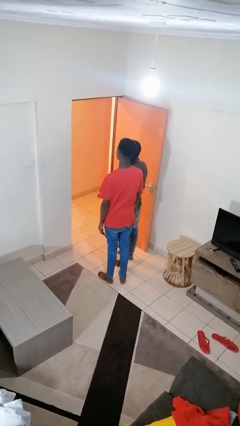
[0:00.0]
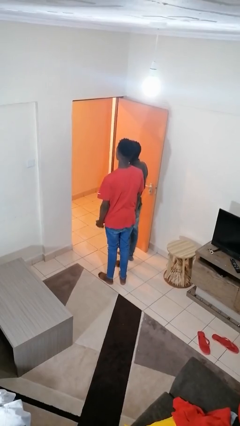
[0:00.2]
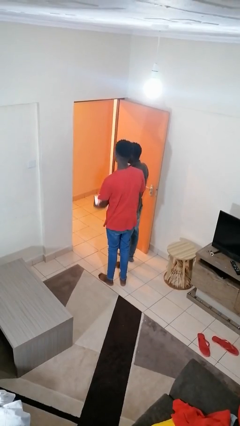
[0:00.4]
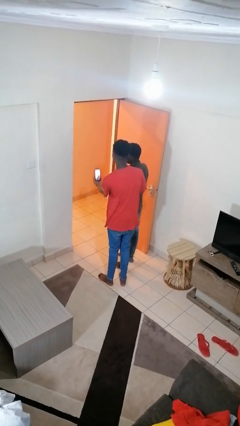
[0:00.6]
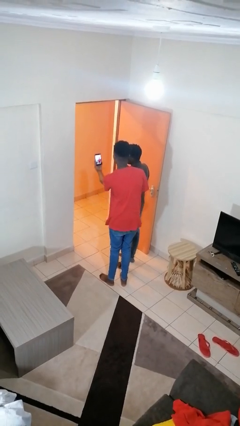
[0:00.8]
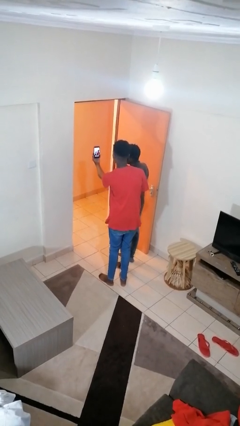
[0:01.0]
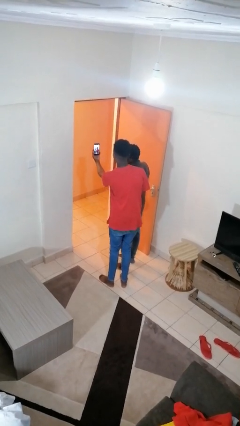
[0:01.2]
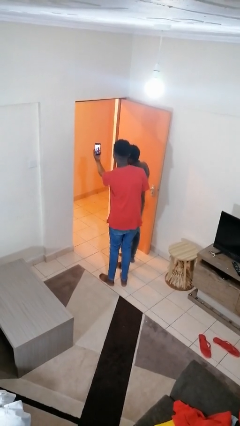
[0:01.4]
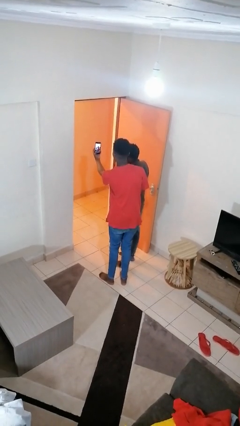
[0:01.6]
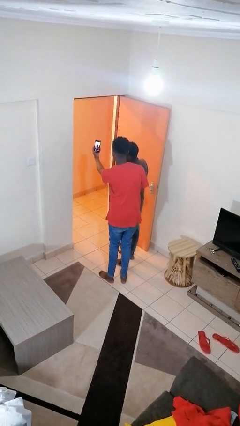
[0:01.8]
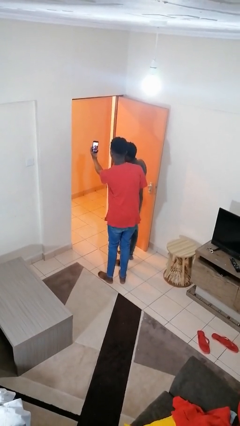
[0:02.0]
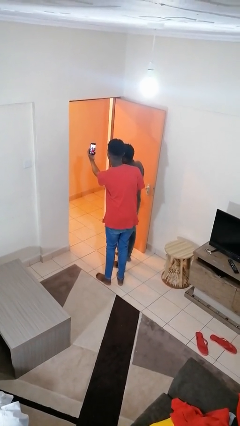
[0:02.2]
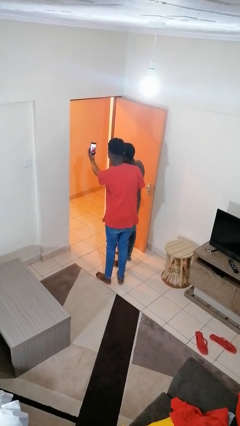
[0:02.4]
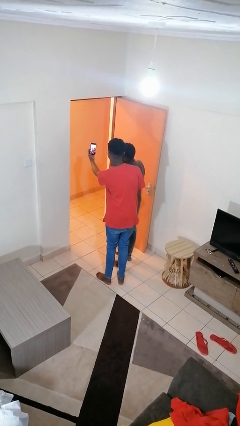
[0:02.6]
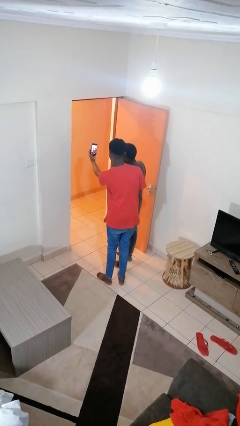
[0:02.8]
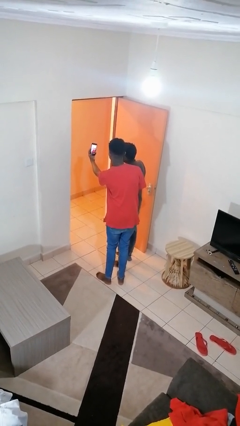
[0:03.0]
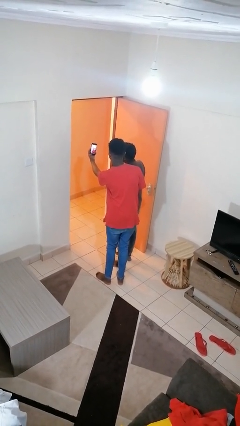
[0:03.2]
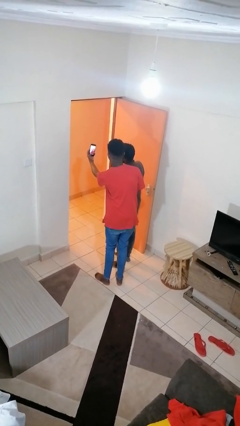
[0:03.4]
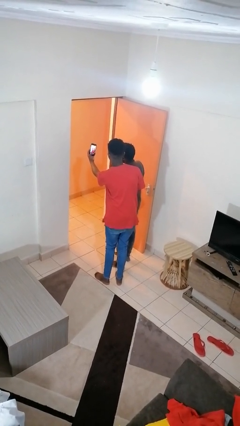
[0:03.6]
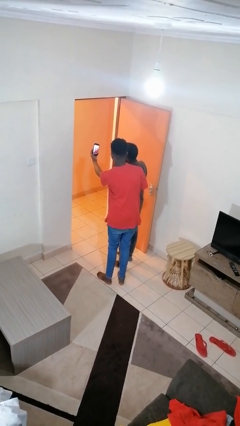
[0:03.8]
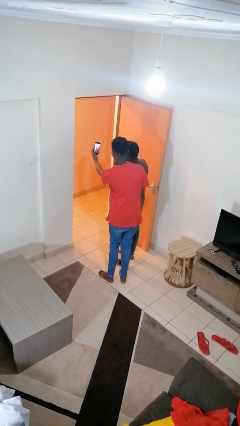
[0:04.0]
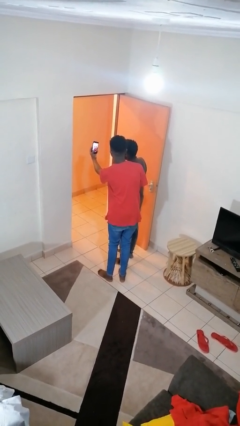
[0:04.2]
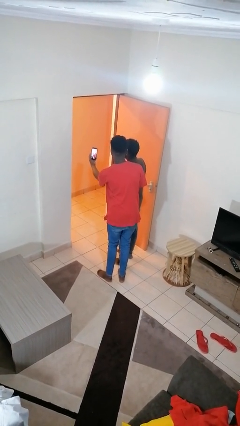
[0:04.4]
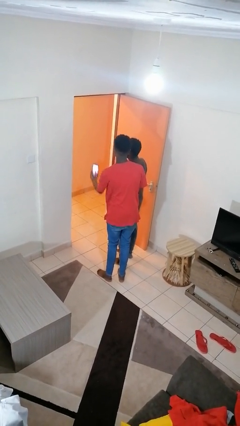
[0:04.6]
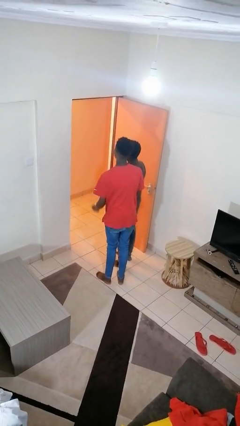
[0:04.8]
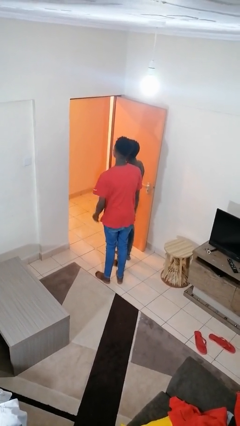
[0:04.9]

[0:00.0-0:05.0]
person takes selfie with person

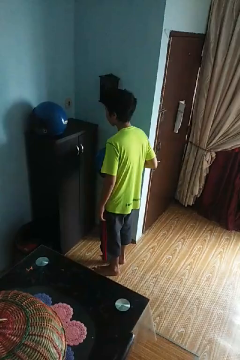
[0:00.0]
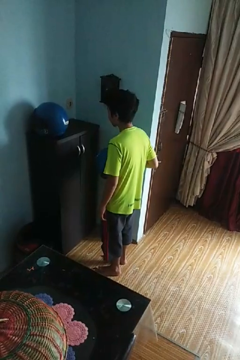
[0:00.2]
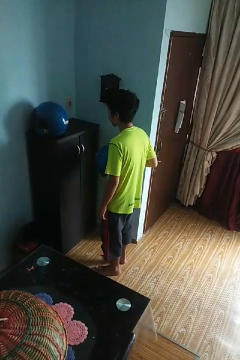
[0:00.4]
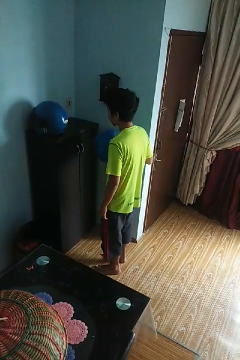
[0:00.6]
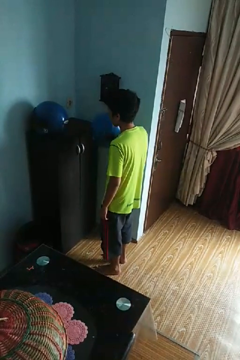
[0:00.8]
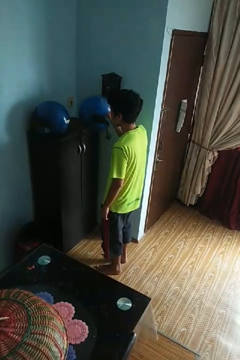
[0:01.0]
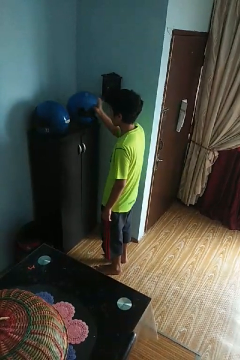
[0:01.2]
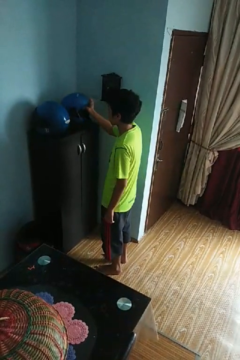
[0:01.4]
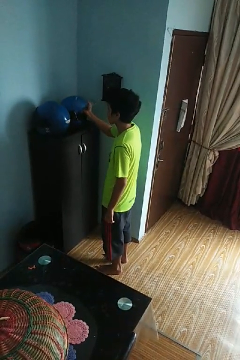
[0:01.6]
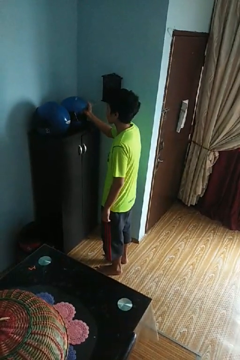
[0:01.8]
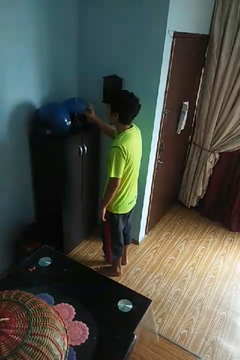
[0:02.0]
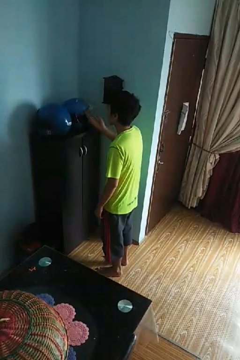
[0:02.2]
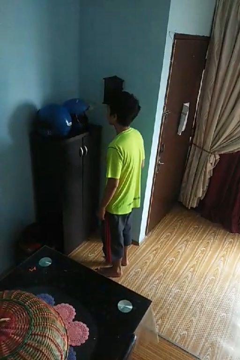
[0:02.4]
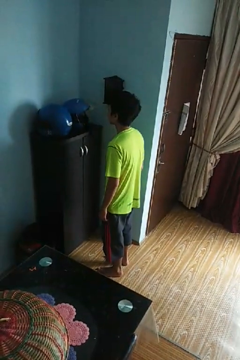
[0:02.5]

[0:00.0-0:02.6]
person puts down object on countertop

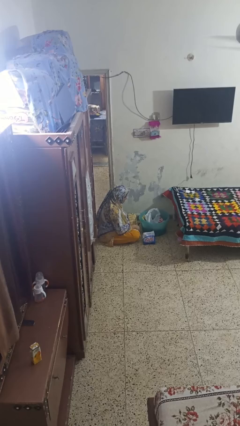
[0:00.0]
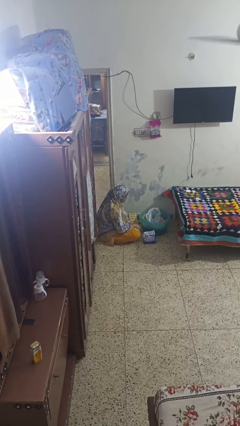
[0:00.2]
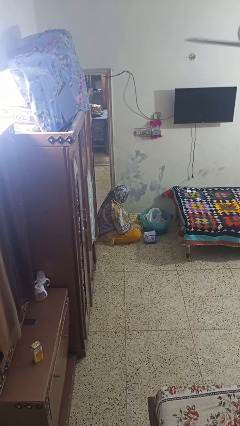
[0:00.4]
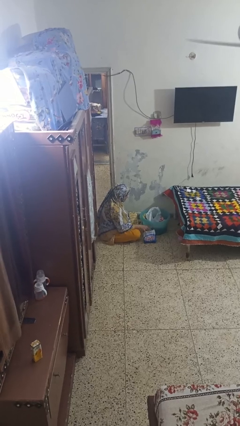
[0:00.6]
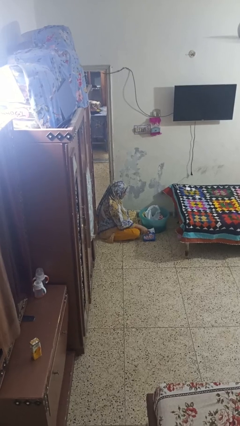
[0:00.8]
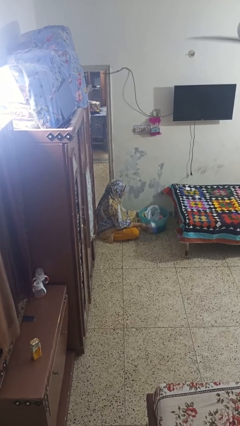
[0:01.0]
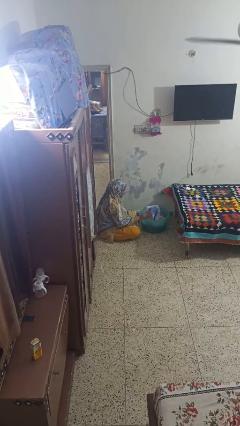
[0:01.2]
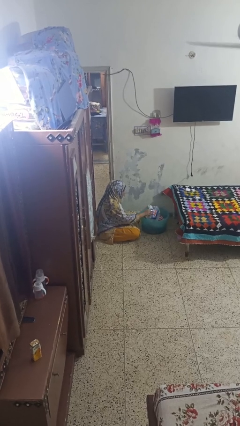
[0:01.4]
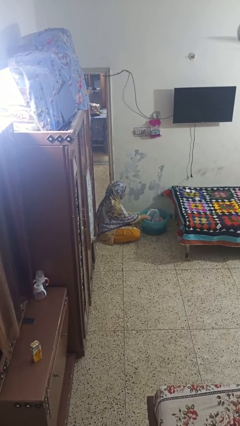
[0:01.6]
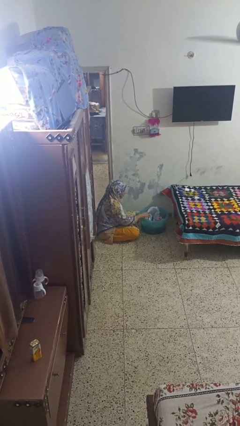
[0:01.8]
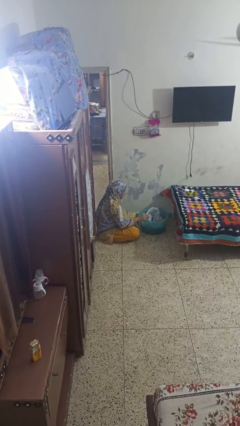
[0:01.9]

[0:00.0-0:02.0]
person puts object into basket

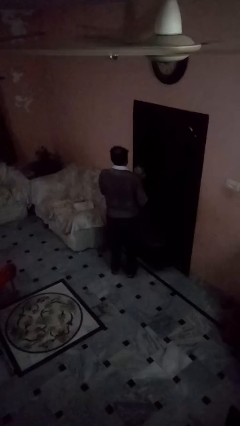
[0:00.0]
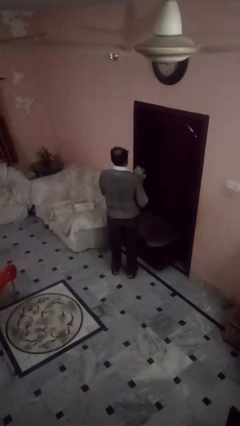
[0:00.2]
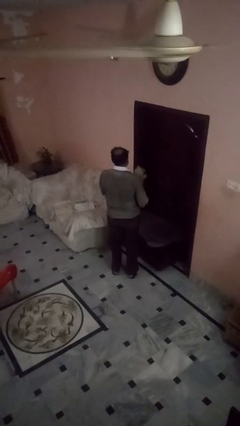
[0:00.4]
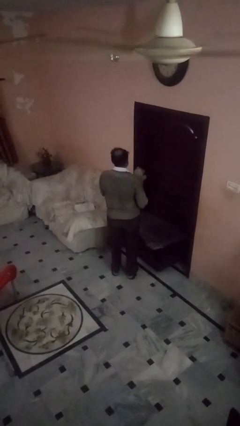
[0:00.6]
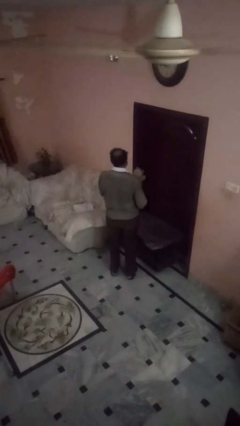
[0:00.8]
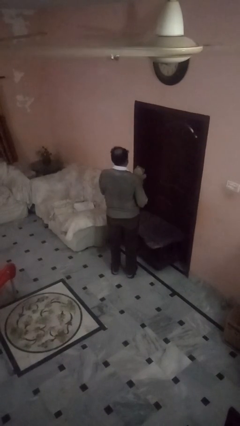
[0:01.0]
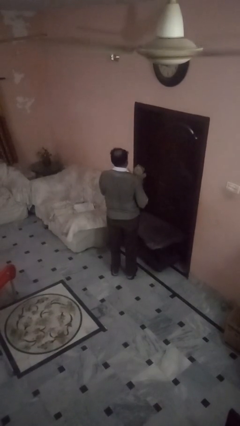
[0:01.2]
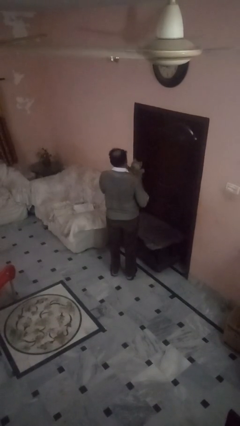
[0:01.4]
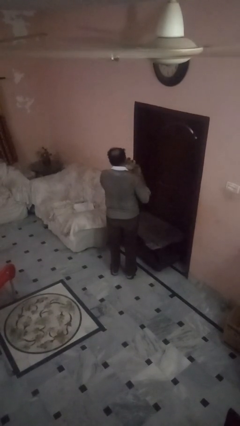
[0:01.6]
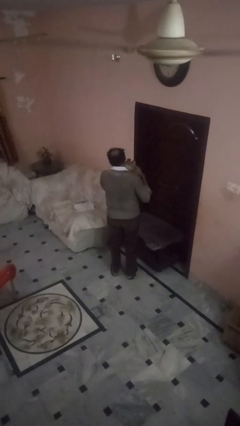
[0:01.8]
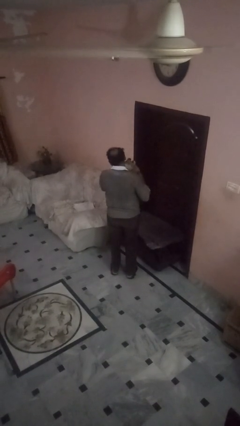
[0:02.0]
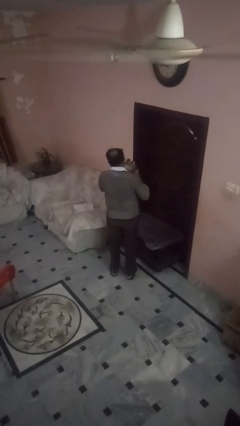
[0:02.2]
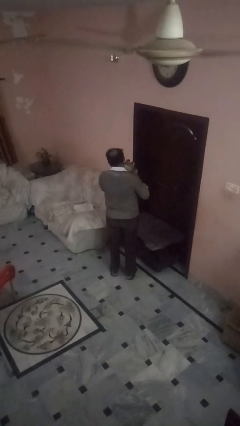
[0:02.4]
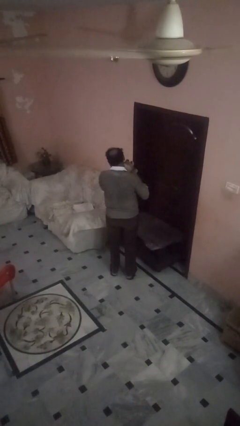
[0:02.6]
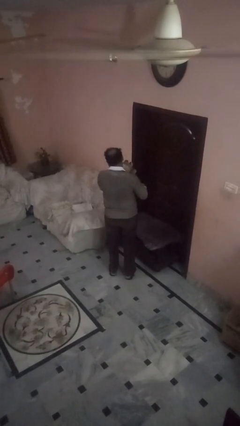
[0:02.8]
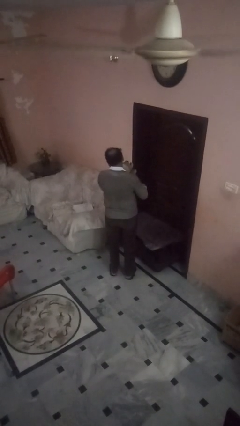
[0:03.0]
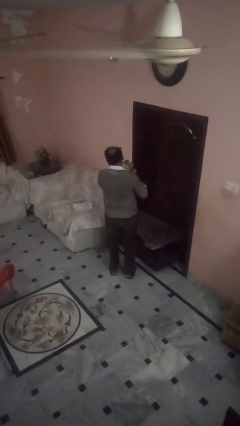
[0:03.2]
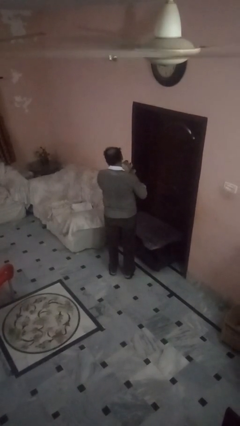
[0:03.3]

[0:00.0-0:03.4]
person hugs stuffed animal

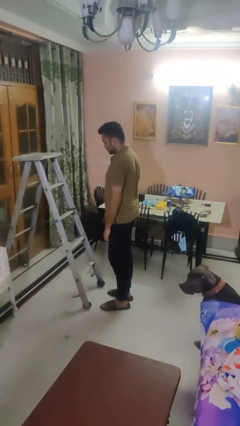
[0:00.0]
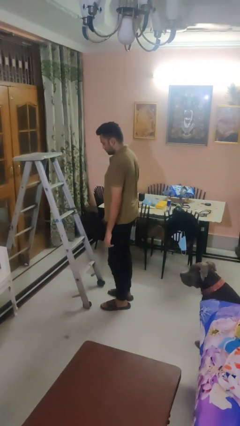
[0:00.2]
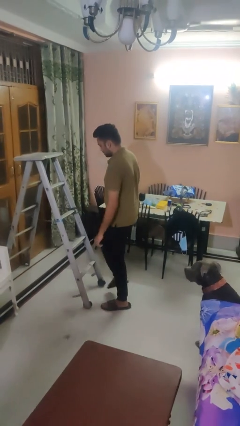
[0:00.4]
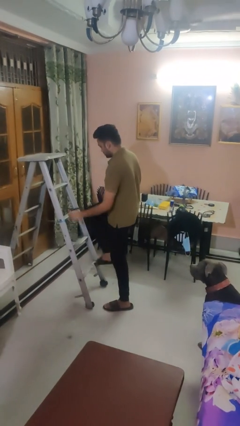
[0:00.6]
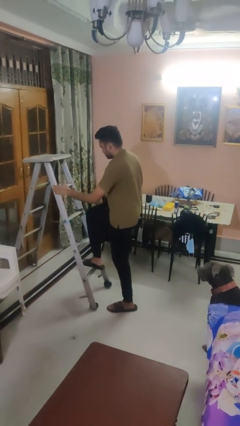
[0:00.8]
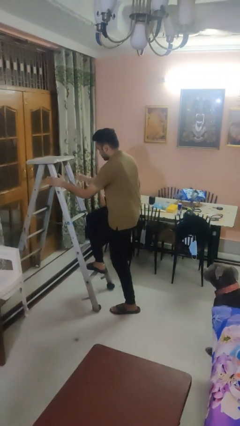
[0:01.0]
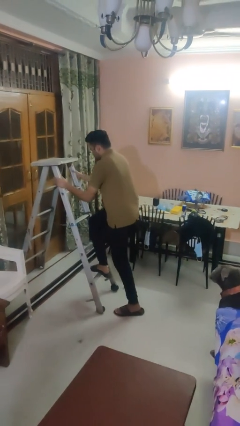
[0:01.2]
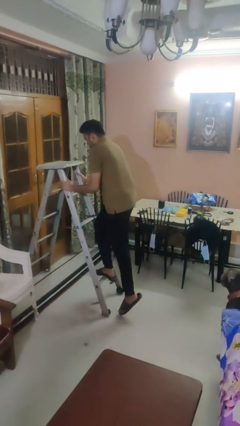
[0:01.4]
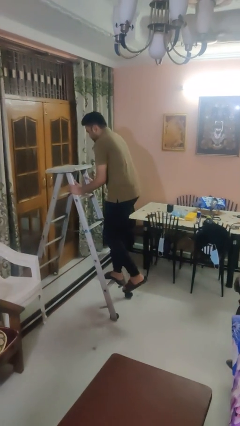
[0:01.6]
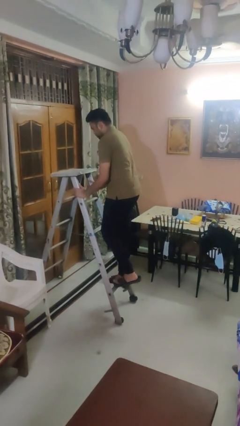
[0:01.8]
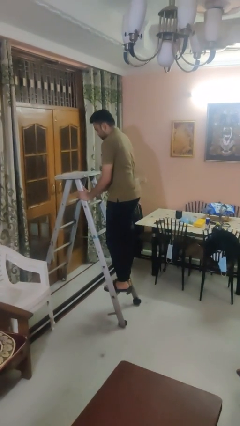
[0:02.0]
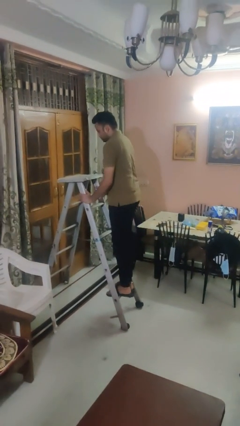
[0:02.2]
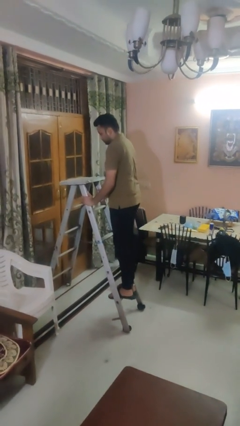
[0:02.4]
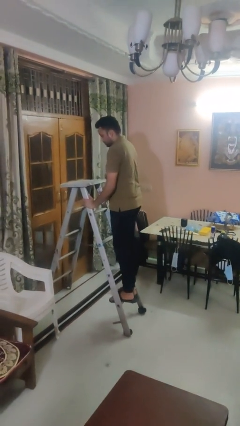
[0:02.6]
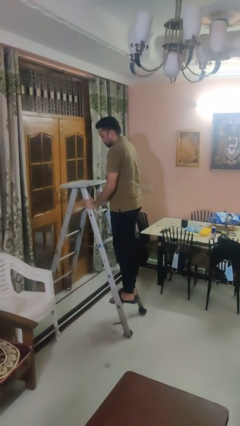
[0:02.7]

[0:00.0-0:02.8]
person climbs up ladder

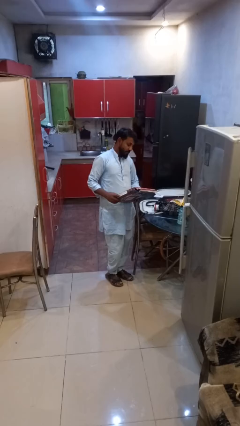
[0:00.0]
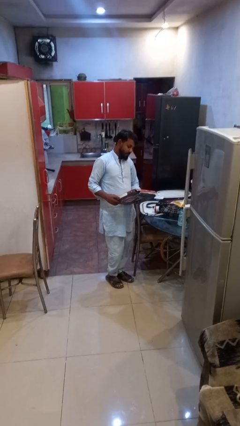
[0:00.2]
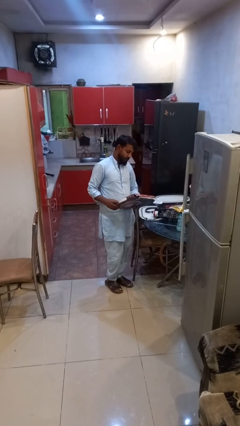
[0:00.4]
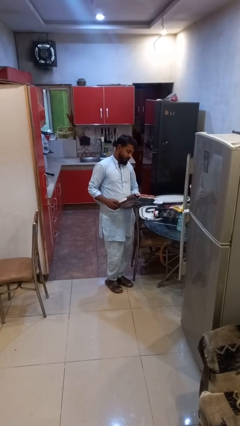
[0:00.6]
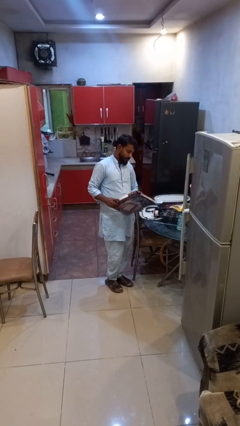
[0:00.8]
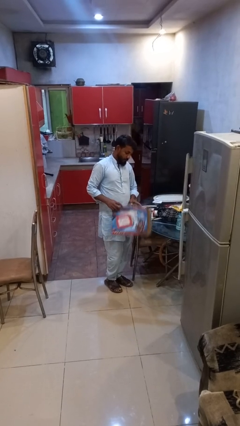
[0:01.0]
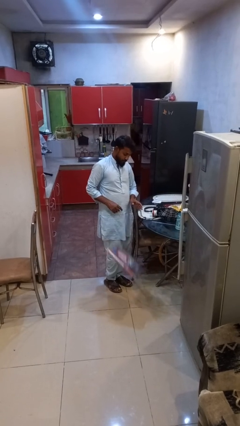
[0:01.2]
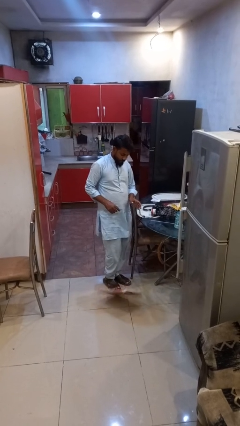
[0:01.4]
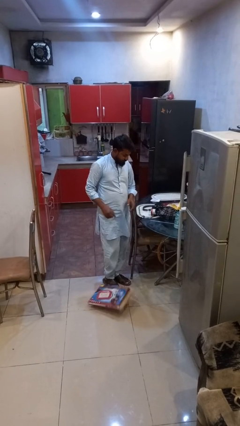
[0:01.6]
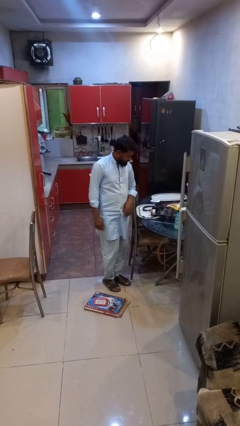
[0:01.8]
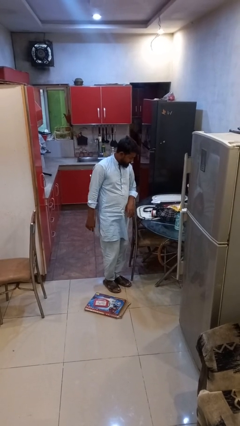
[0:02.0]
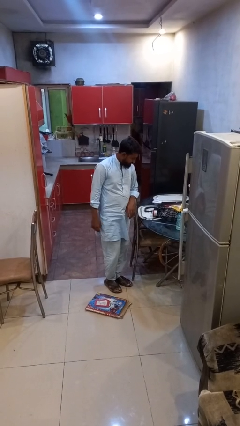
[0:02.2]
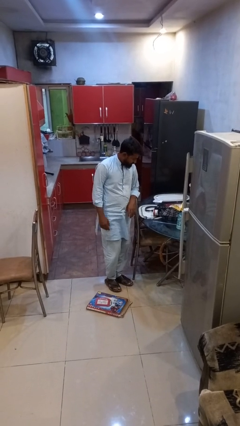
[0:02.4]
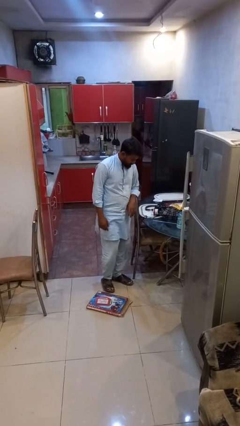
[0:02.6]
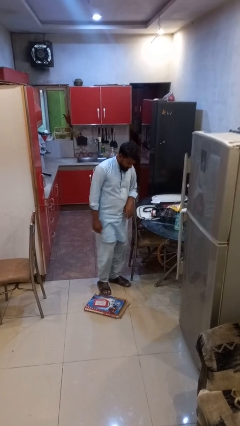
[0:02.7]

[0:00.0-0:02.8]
person drops object
